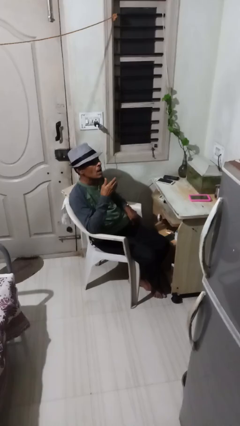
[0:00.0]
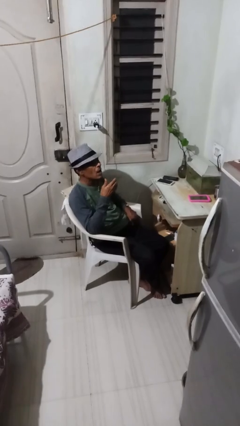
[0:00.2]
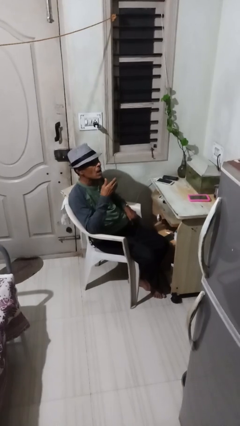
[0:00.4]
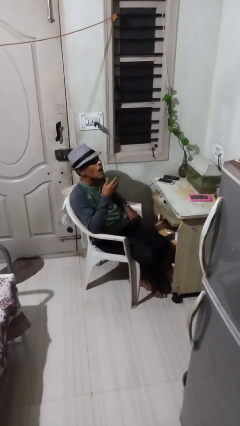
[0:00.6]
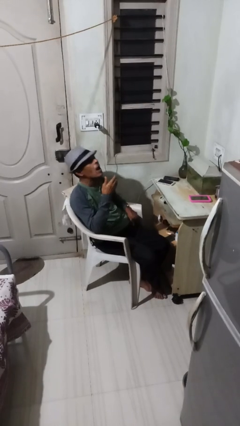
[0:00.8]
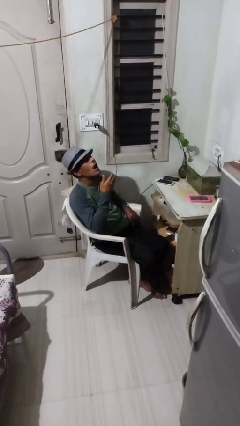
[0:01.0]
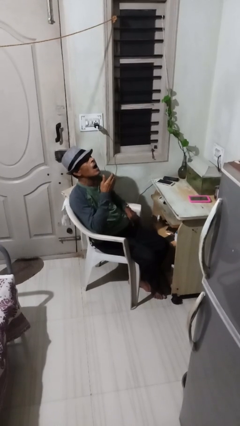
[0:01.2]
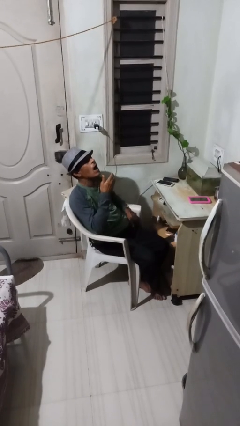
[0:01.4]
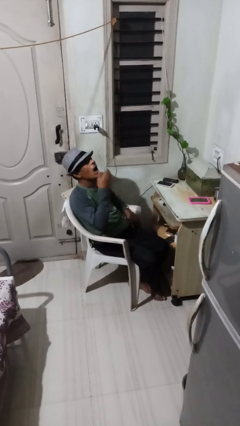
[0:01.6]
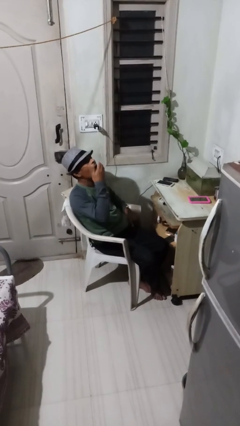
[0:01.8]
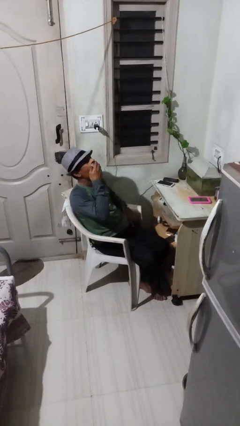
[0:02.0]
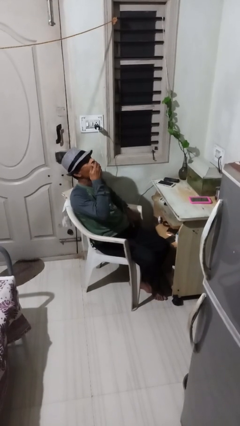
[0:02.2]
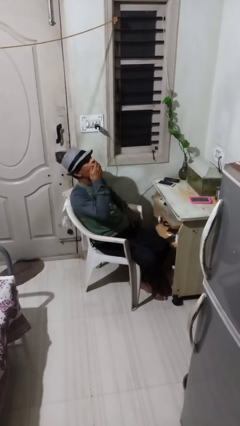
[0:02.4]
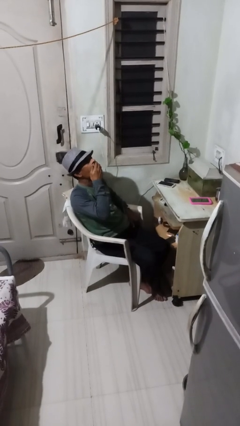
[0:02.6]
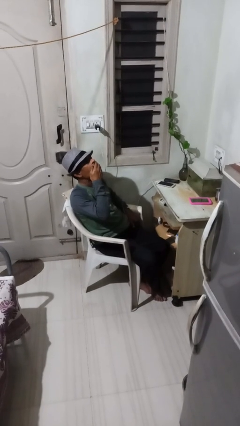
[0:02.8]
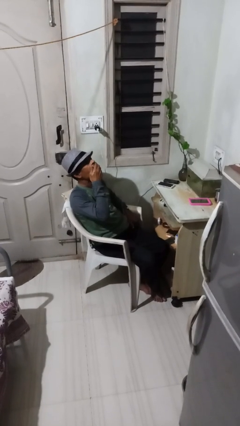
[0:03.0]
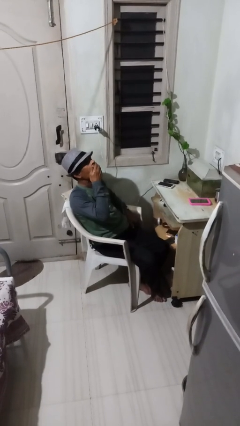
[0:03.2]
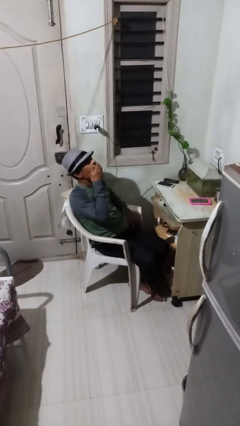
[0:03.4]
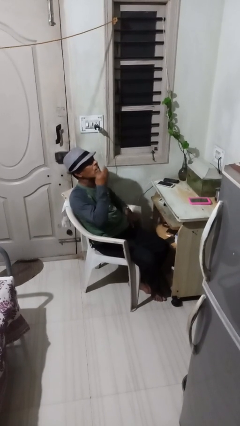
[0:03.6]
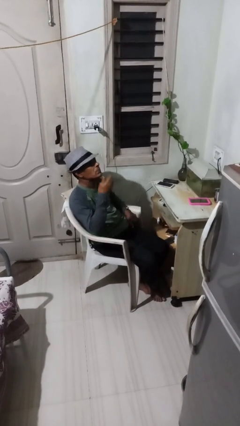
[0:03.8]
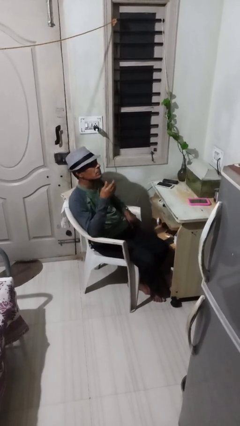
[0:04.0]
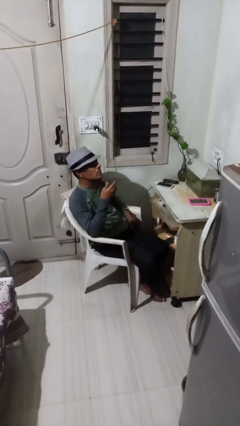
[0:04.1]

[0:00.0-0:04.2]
person yawns

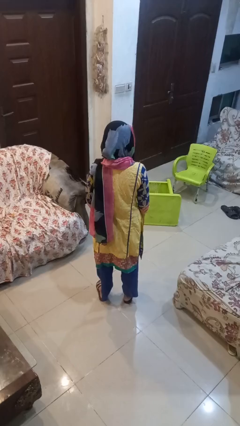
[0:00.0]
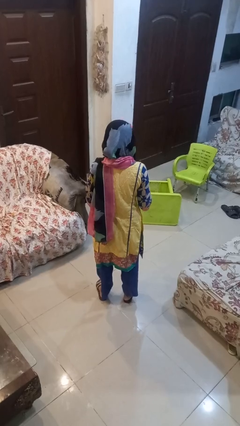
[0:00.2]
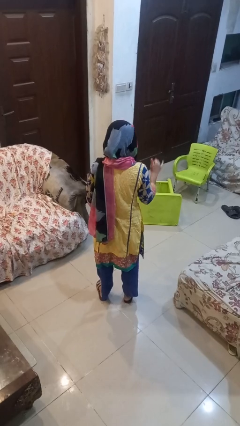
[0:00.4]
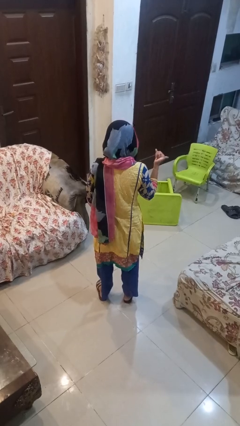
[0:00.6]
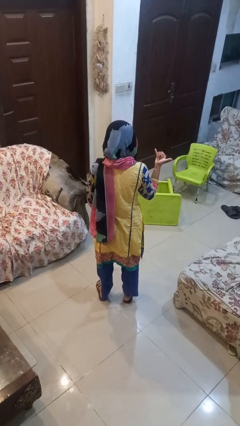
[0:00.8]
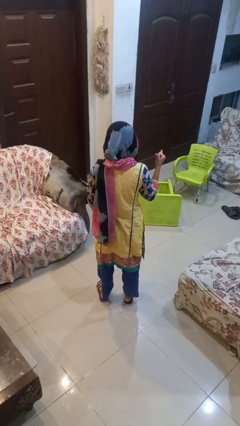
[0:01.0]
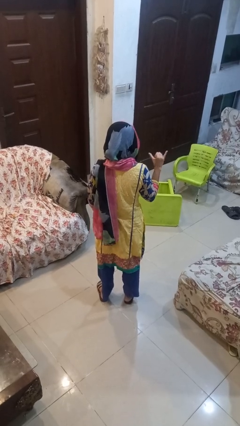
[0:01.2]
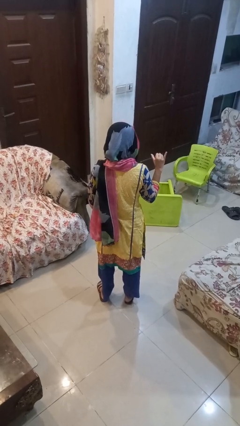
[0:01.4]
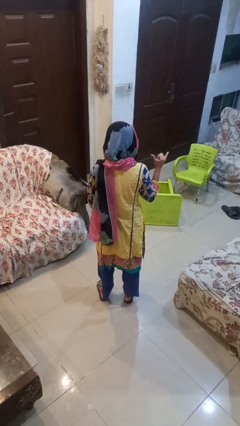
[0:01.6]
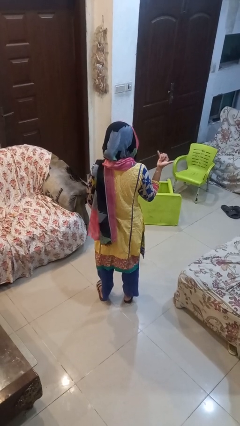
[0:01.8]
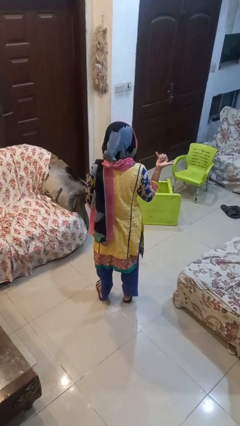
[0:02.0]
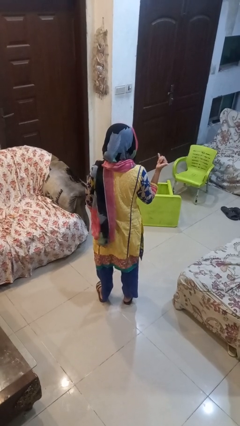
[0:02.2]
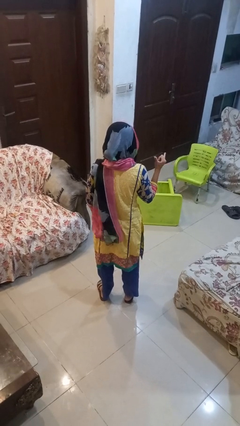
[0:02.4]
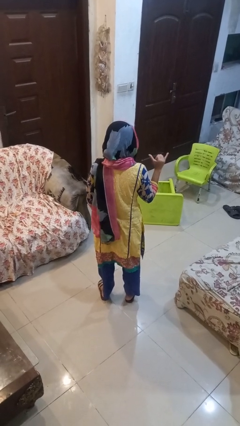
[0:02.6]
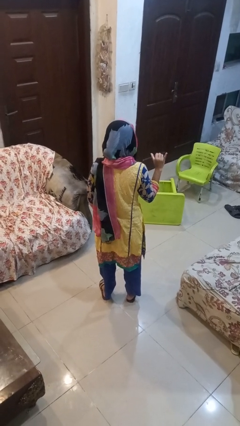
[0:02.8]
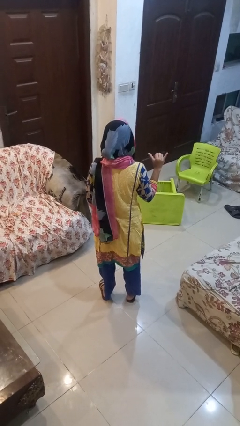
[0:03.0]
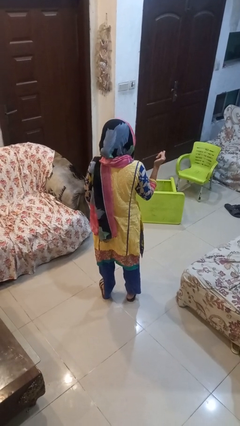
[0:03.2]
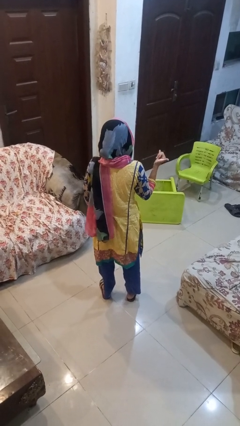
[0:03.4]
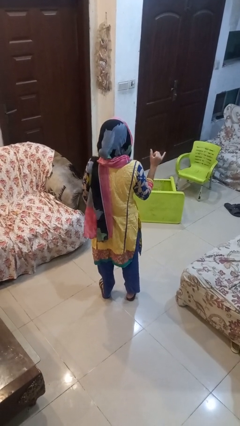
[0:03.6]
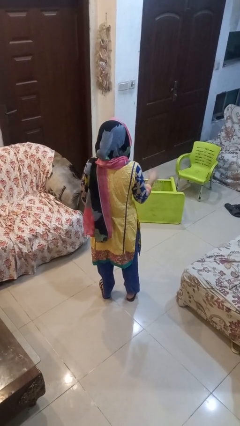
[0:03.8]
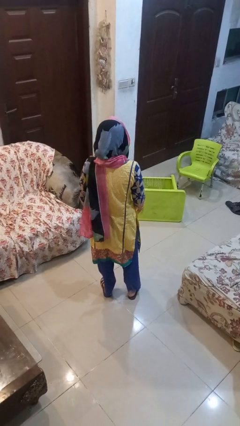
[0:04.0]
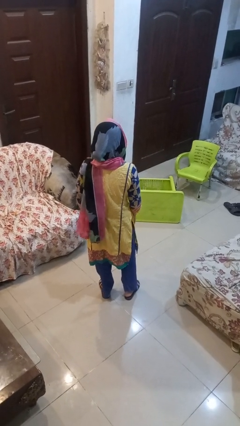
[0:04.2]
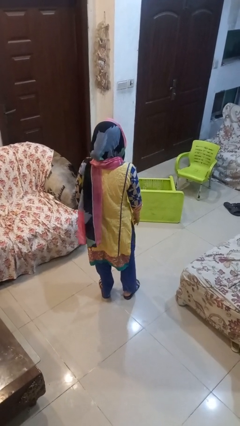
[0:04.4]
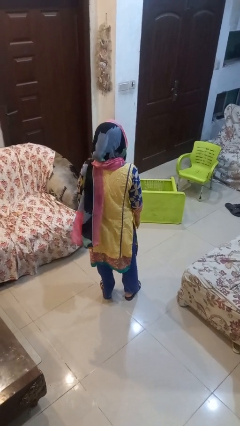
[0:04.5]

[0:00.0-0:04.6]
person gestures hang loose

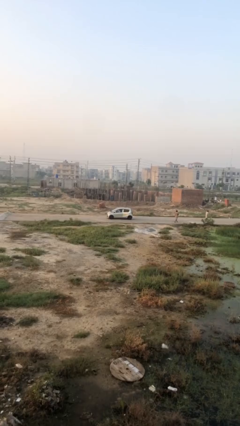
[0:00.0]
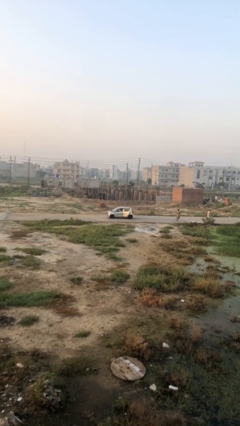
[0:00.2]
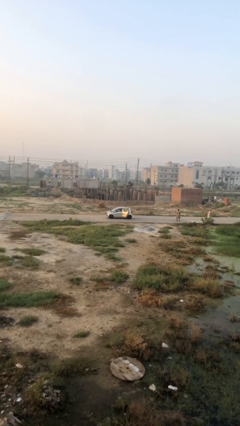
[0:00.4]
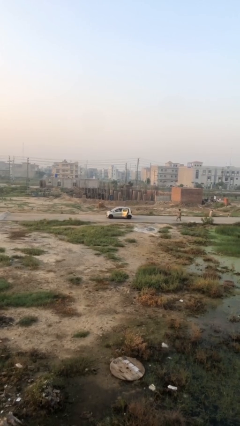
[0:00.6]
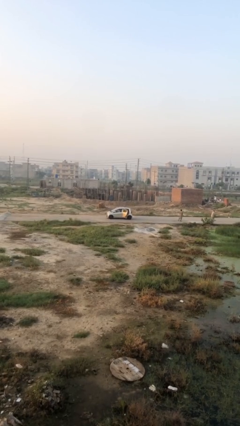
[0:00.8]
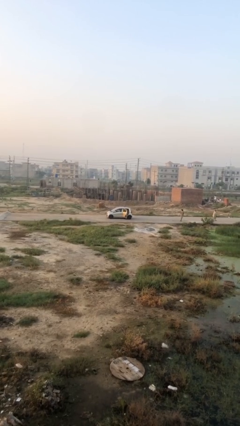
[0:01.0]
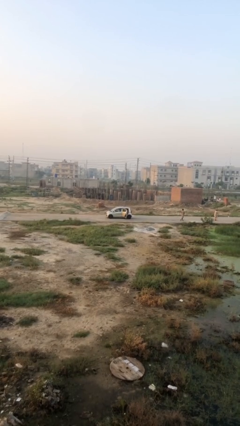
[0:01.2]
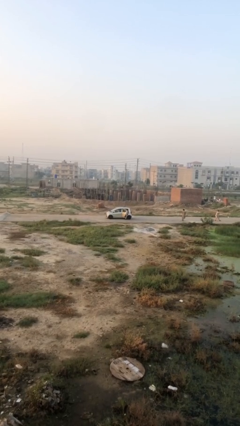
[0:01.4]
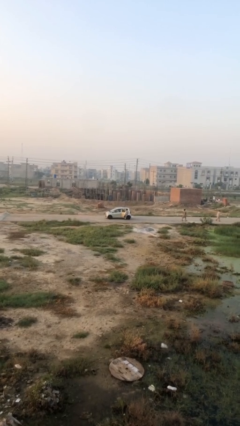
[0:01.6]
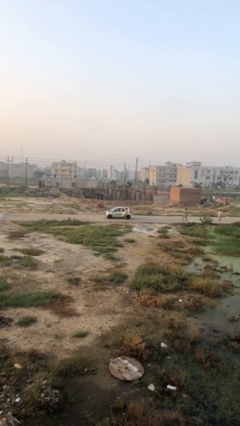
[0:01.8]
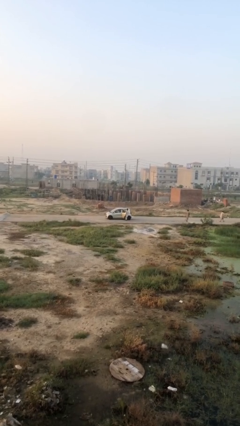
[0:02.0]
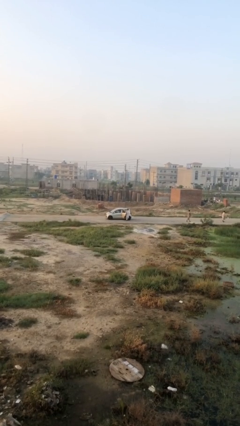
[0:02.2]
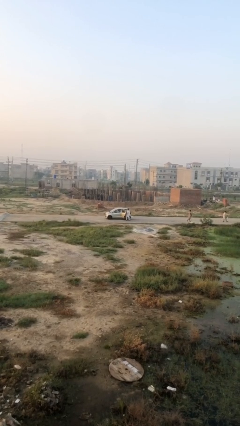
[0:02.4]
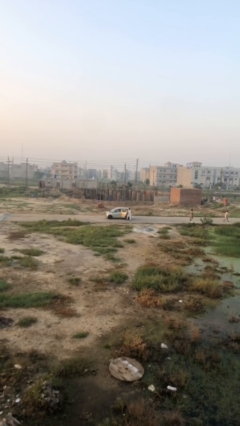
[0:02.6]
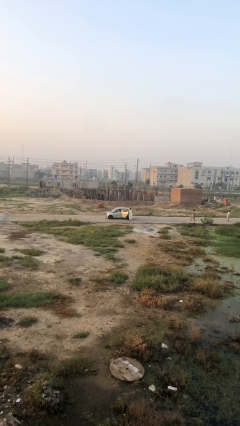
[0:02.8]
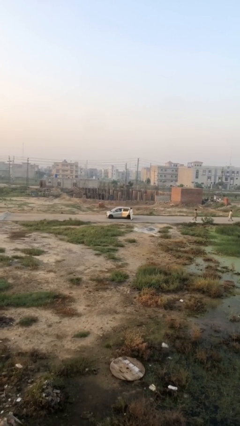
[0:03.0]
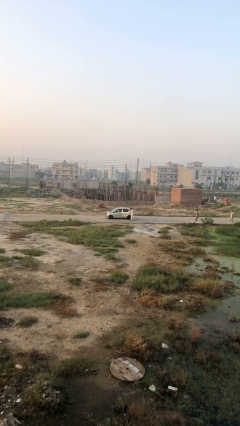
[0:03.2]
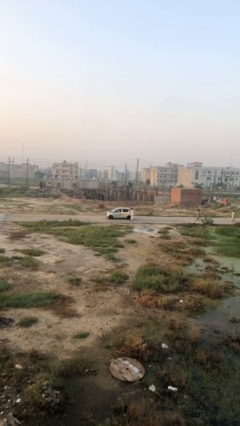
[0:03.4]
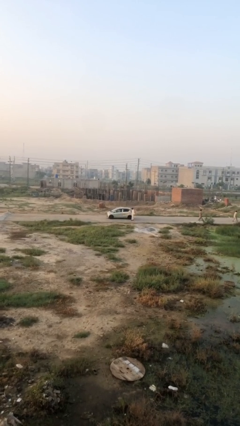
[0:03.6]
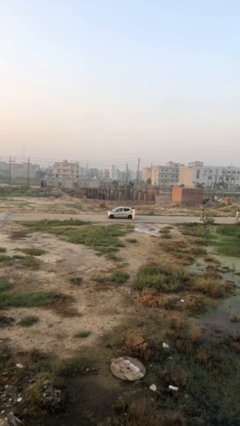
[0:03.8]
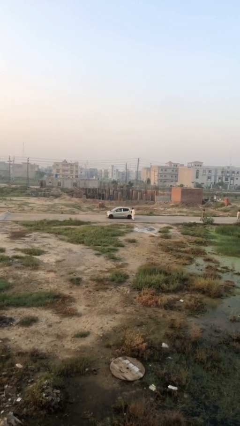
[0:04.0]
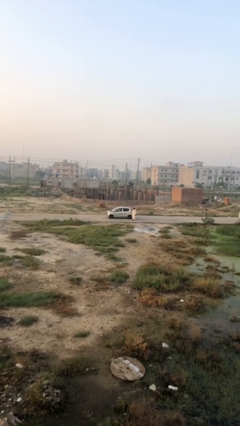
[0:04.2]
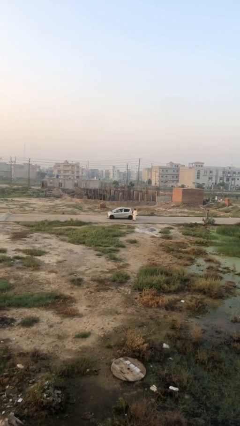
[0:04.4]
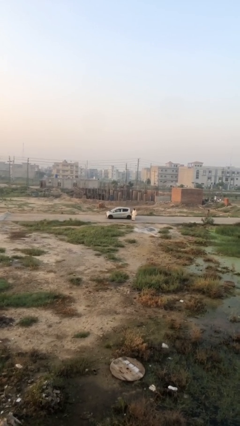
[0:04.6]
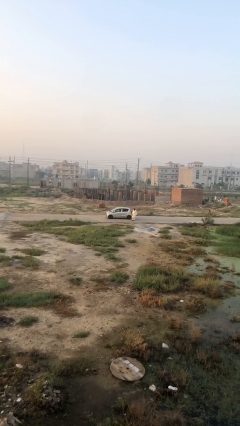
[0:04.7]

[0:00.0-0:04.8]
car drops off person

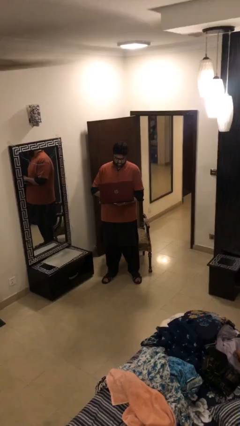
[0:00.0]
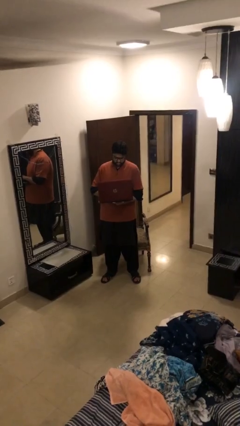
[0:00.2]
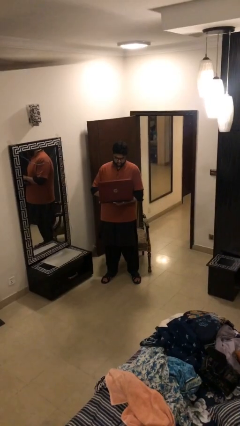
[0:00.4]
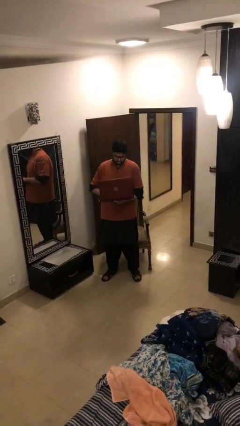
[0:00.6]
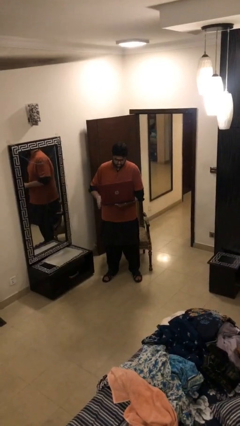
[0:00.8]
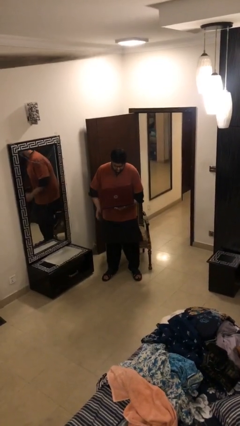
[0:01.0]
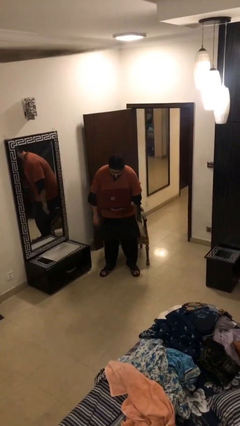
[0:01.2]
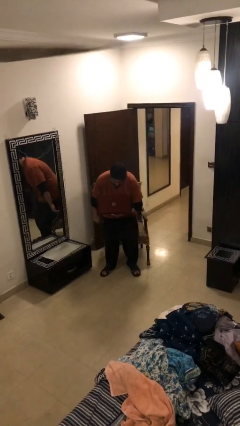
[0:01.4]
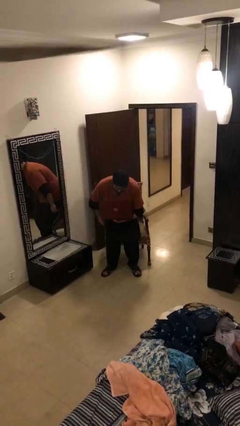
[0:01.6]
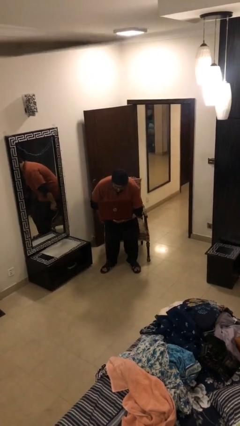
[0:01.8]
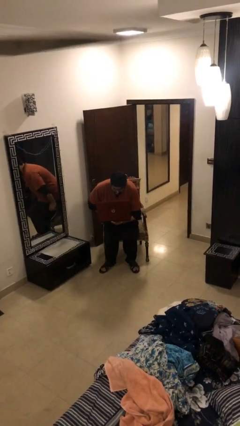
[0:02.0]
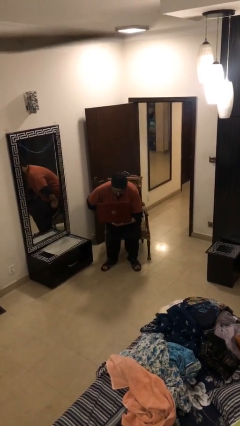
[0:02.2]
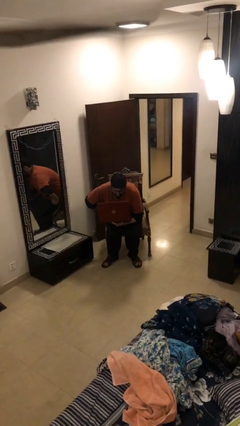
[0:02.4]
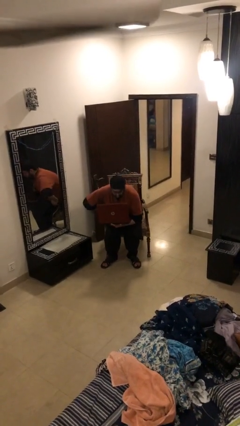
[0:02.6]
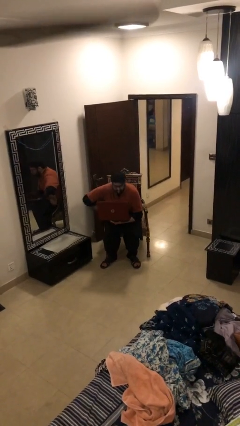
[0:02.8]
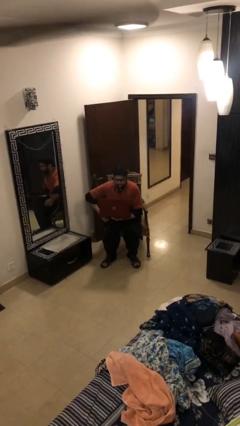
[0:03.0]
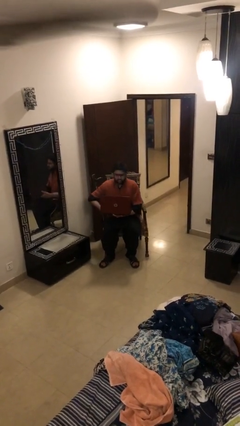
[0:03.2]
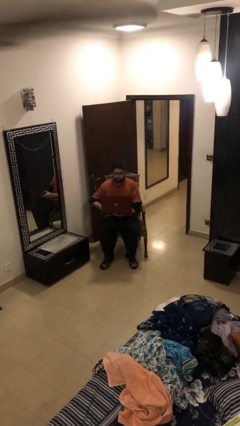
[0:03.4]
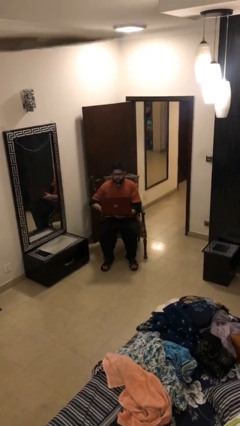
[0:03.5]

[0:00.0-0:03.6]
person sits down

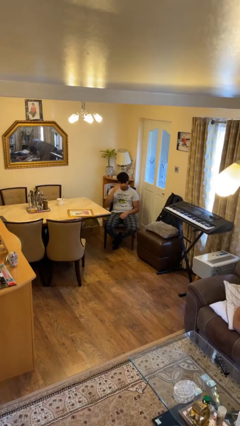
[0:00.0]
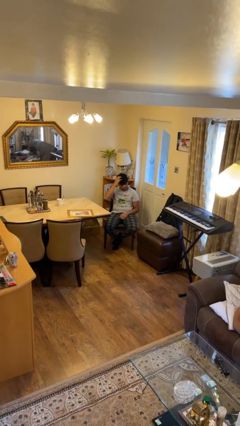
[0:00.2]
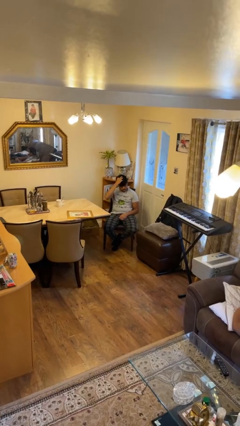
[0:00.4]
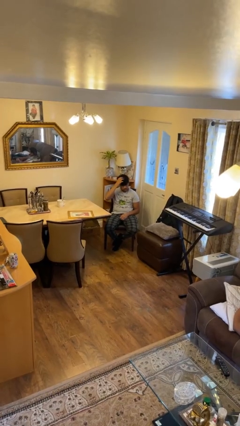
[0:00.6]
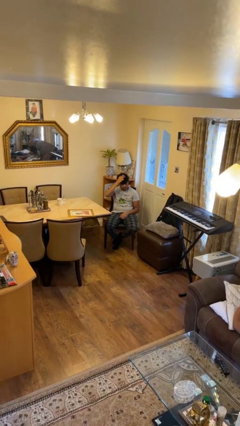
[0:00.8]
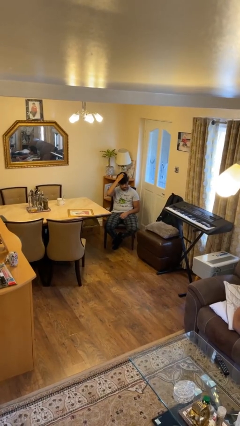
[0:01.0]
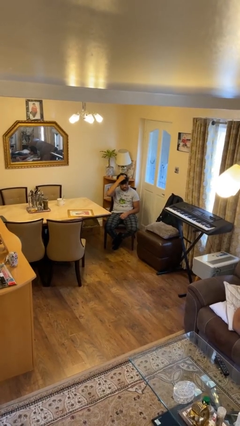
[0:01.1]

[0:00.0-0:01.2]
person strokes hair
